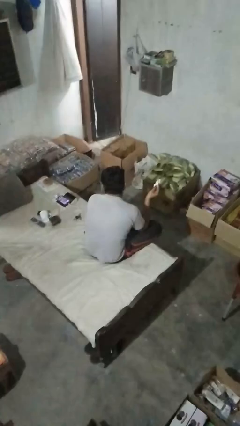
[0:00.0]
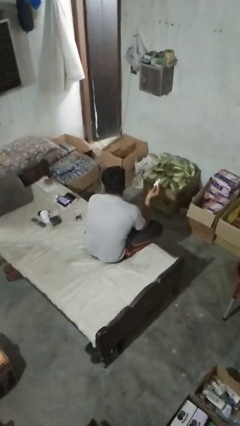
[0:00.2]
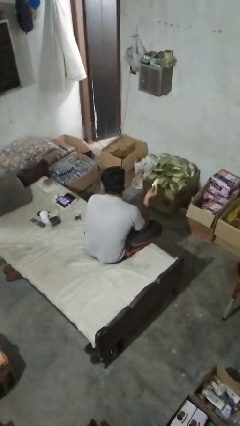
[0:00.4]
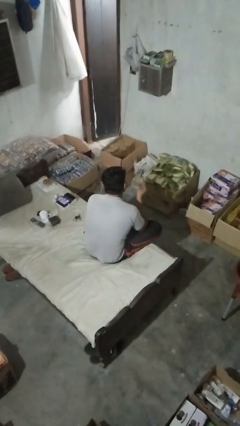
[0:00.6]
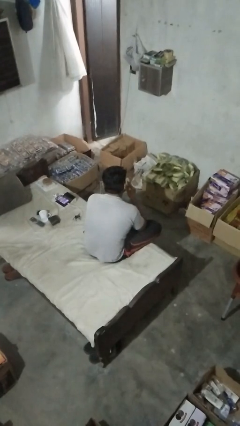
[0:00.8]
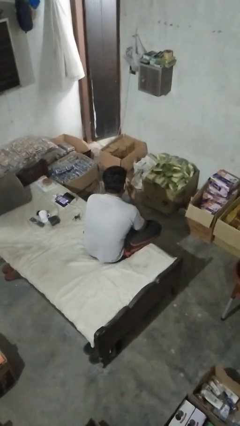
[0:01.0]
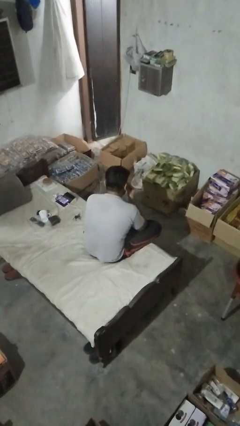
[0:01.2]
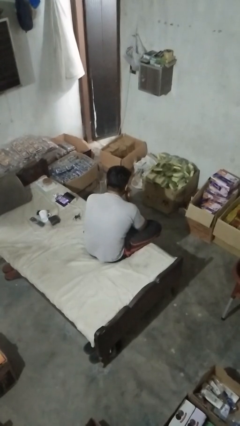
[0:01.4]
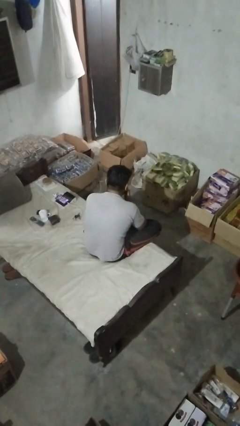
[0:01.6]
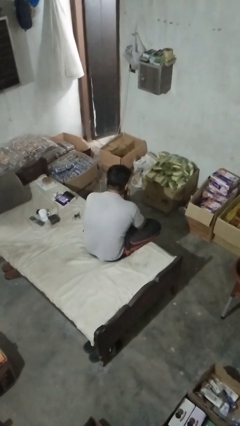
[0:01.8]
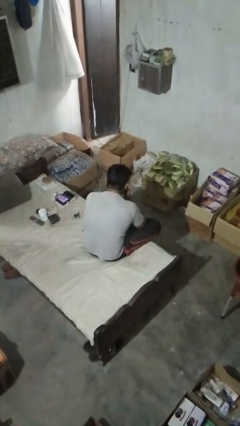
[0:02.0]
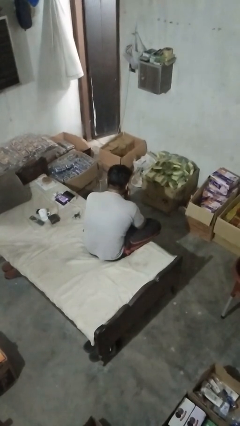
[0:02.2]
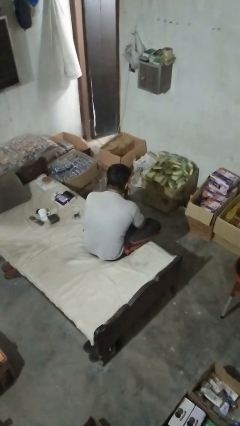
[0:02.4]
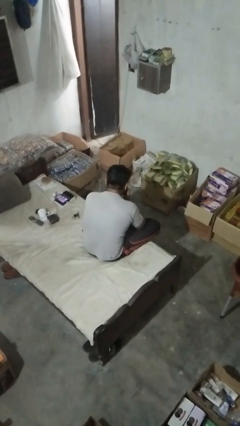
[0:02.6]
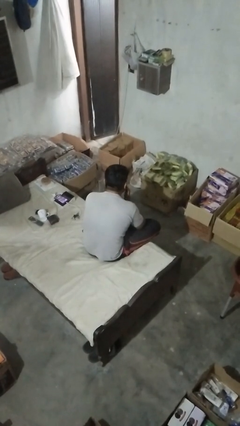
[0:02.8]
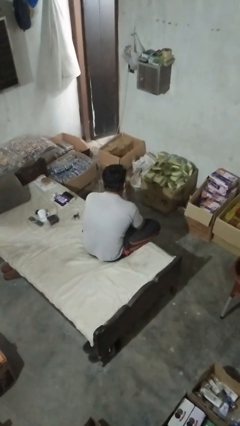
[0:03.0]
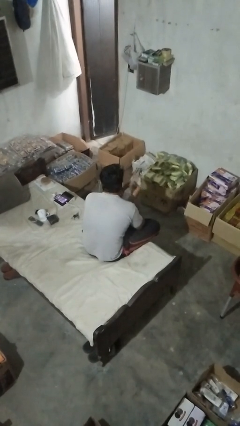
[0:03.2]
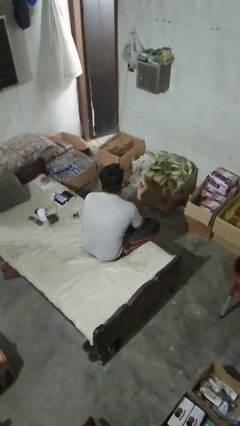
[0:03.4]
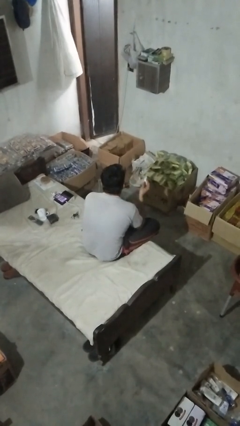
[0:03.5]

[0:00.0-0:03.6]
person blows nose

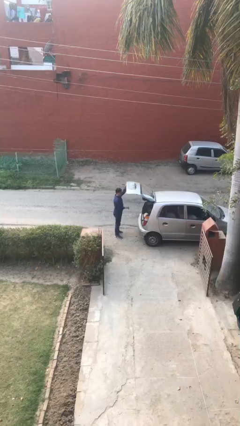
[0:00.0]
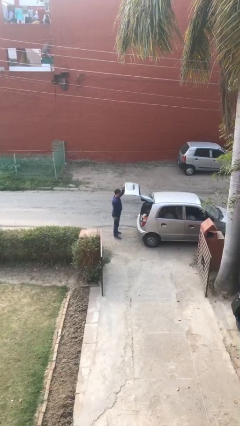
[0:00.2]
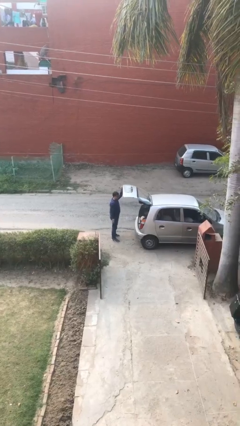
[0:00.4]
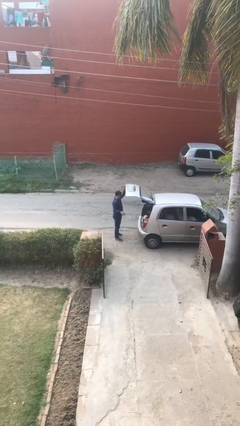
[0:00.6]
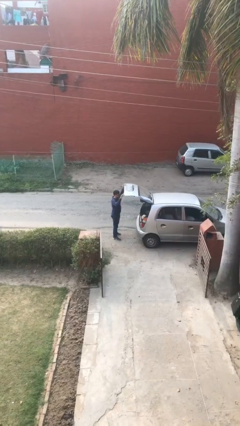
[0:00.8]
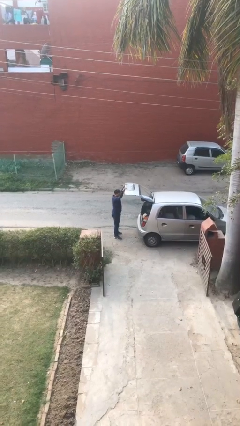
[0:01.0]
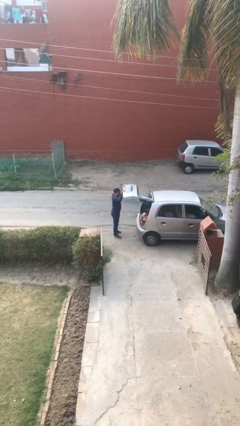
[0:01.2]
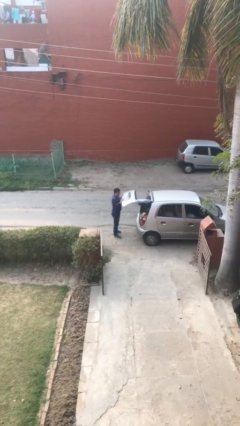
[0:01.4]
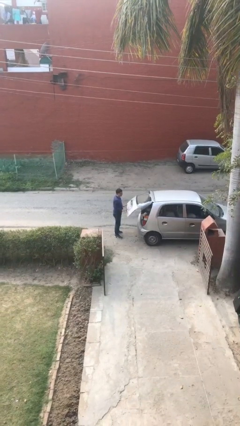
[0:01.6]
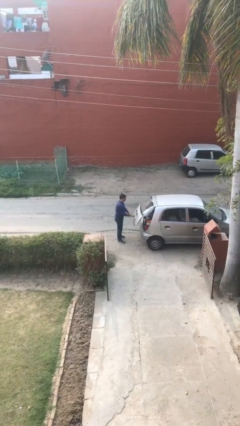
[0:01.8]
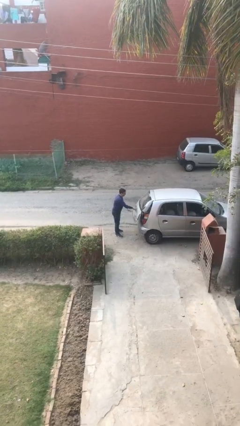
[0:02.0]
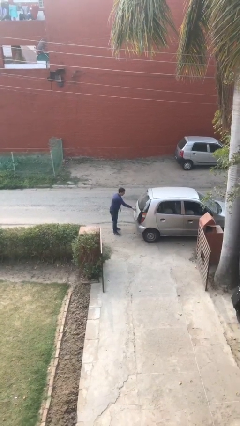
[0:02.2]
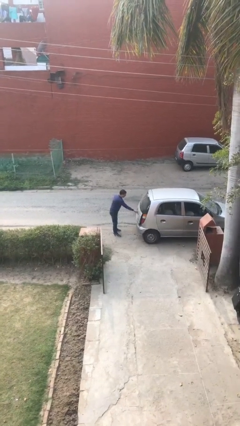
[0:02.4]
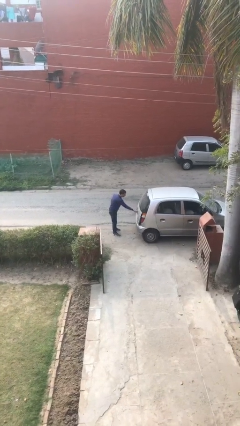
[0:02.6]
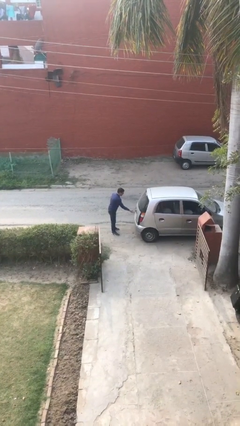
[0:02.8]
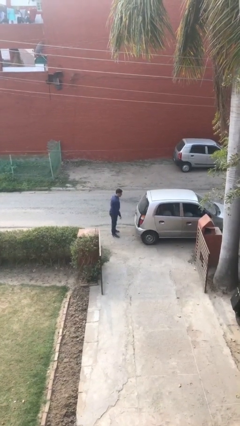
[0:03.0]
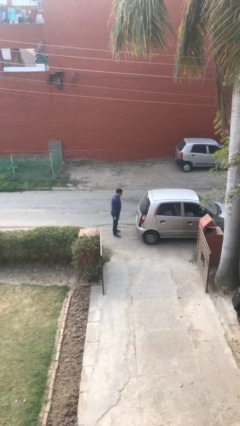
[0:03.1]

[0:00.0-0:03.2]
person closes car trunk

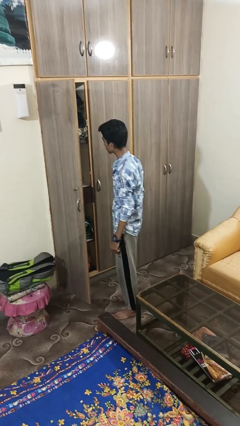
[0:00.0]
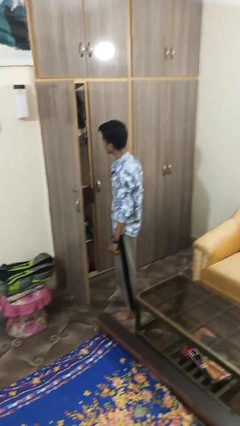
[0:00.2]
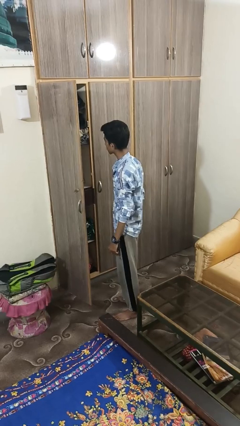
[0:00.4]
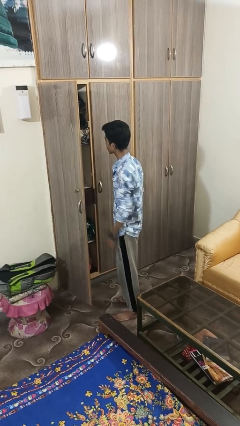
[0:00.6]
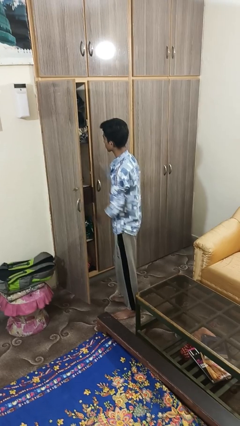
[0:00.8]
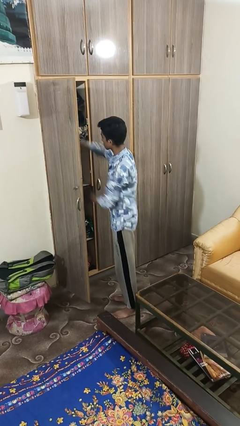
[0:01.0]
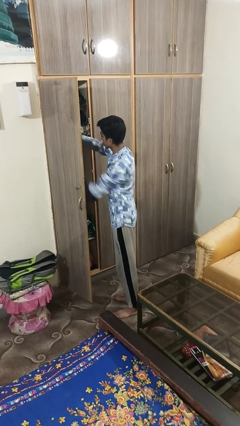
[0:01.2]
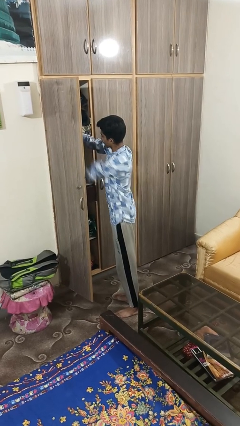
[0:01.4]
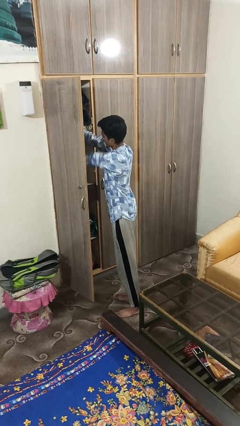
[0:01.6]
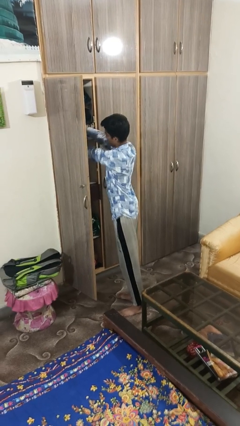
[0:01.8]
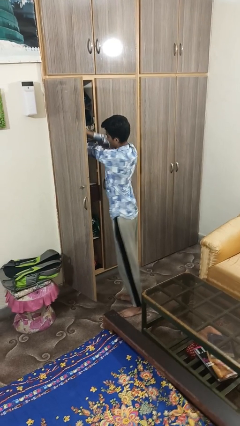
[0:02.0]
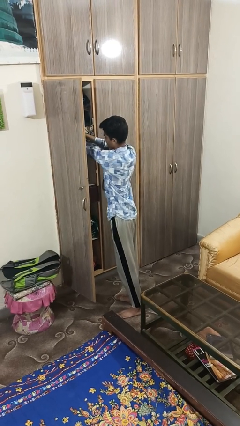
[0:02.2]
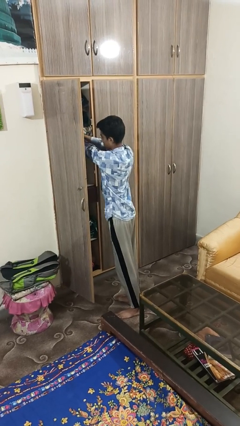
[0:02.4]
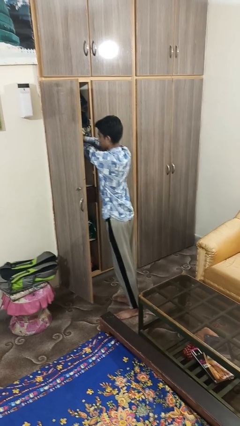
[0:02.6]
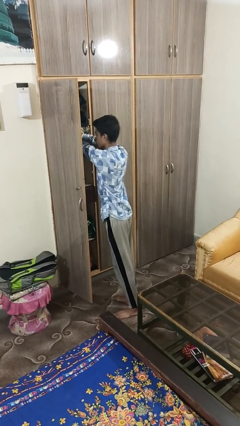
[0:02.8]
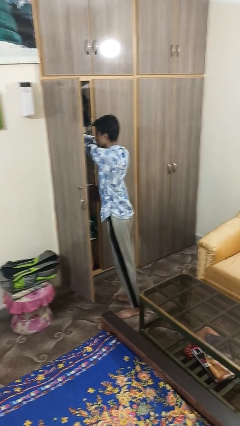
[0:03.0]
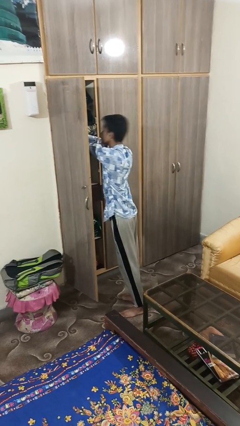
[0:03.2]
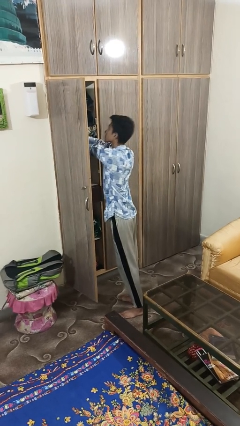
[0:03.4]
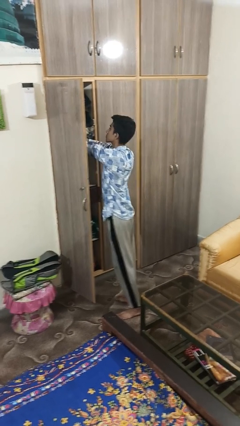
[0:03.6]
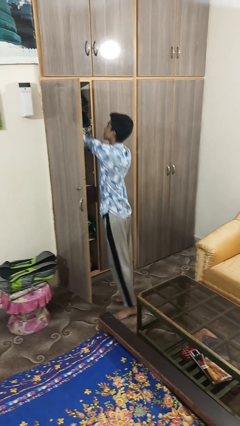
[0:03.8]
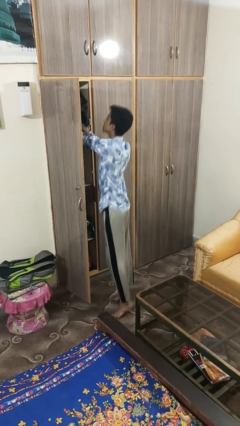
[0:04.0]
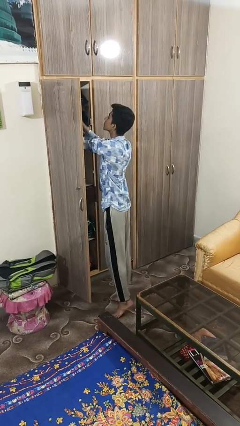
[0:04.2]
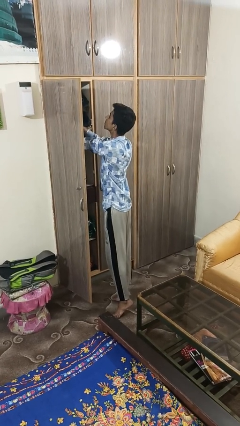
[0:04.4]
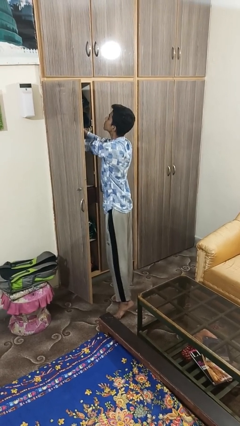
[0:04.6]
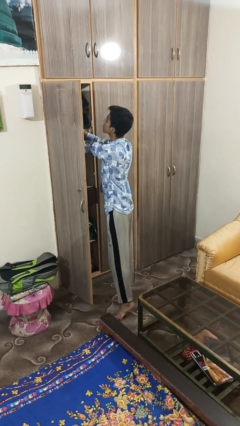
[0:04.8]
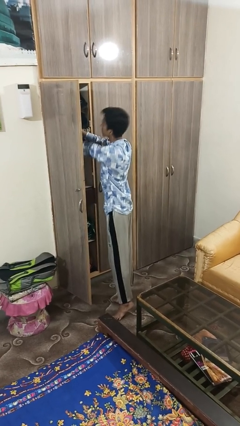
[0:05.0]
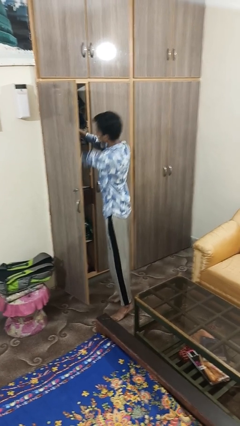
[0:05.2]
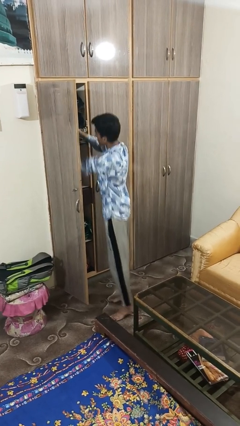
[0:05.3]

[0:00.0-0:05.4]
person searches in cabinet

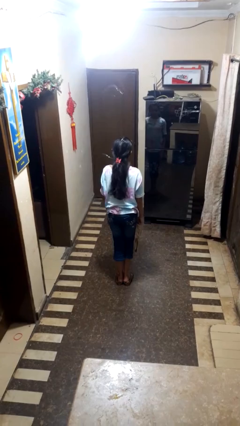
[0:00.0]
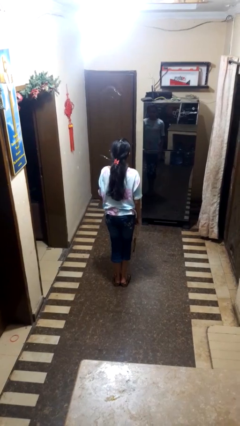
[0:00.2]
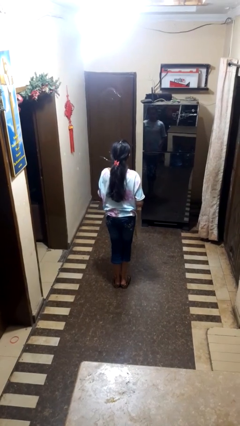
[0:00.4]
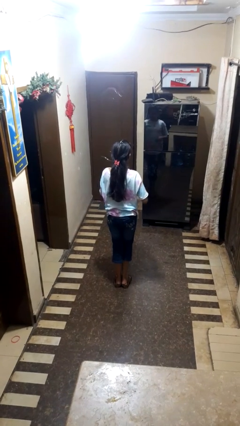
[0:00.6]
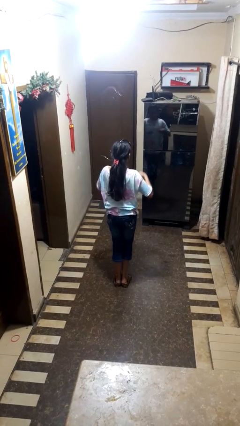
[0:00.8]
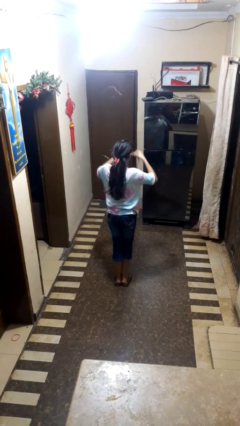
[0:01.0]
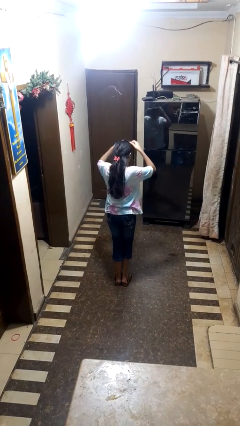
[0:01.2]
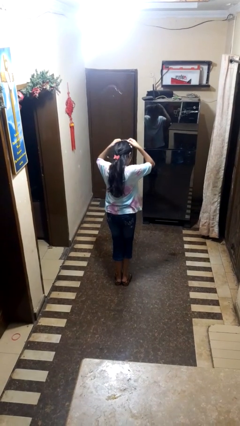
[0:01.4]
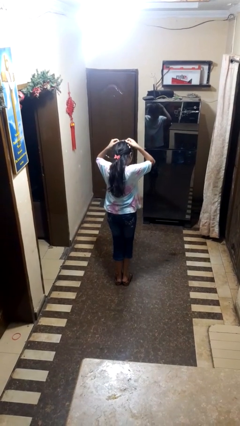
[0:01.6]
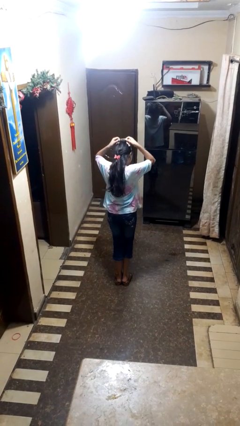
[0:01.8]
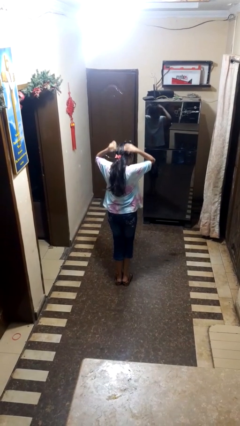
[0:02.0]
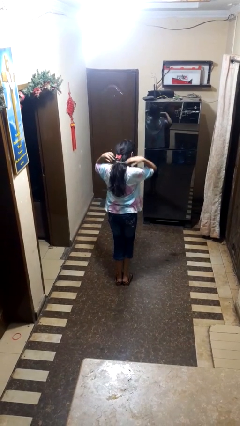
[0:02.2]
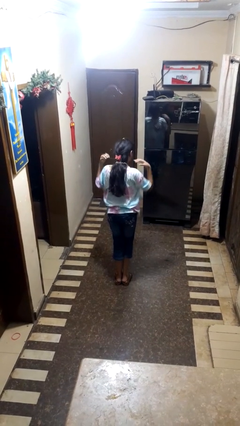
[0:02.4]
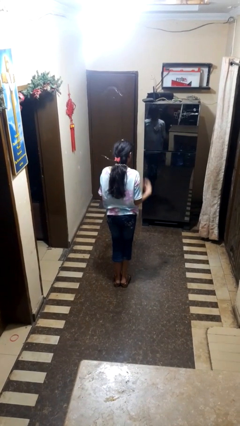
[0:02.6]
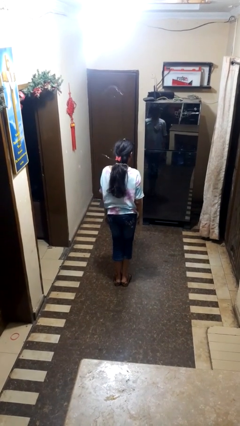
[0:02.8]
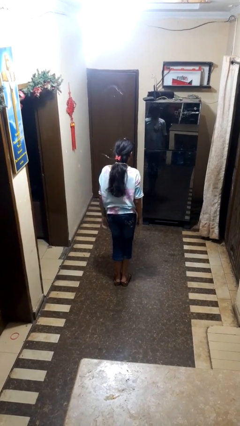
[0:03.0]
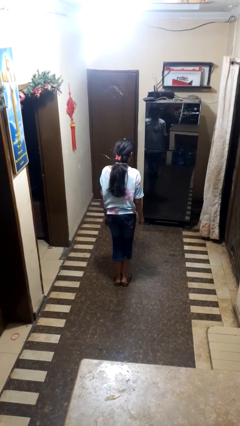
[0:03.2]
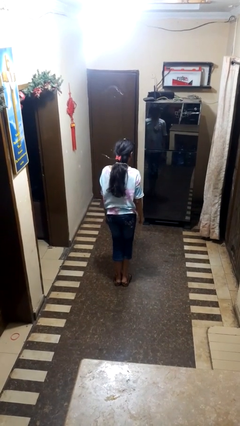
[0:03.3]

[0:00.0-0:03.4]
person puts on necklace

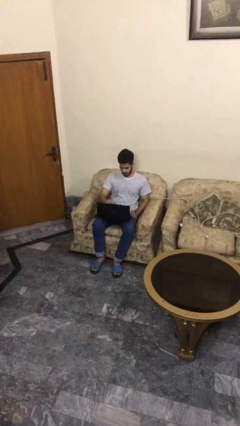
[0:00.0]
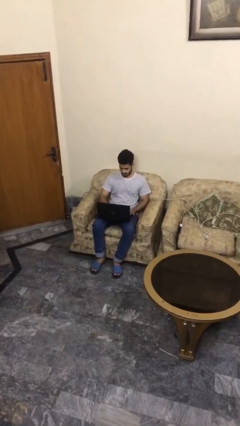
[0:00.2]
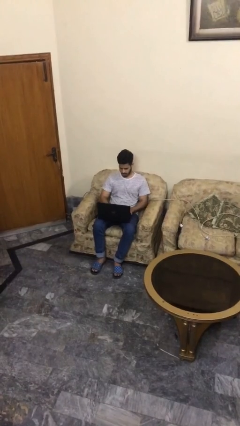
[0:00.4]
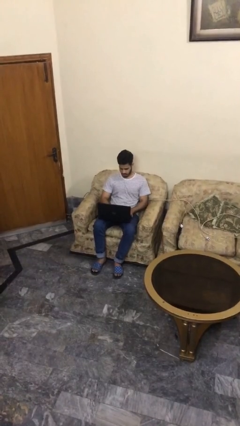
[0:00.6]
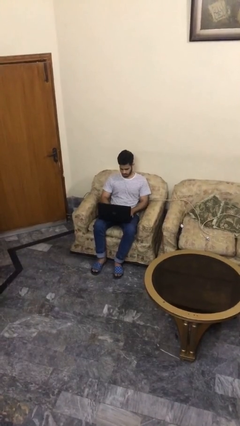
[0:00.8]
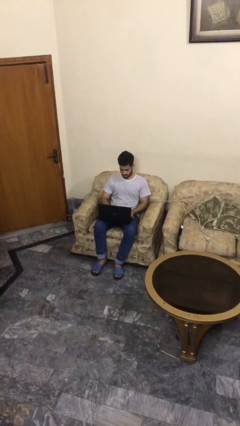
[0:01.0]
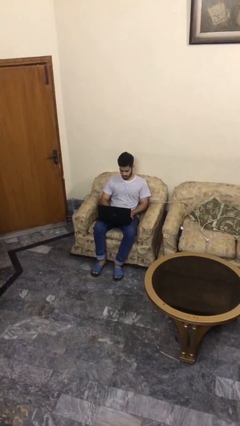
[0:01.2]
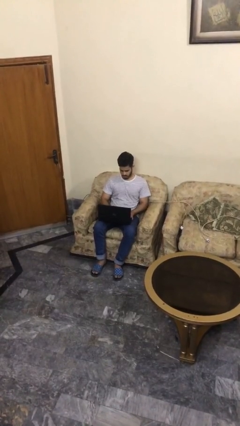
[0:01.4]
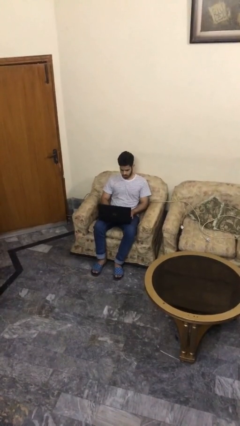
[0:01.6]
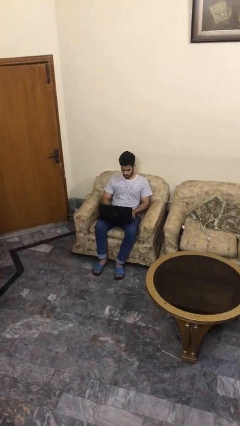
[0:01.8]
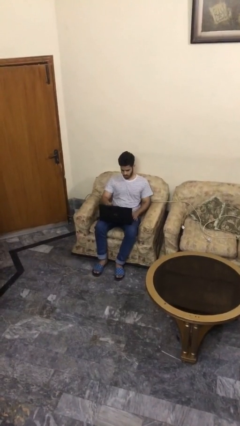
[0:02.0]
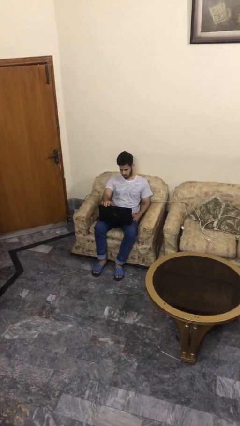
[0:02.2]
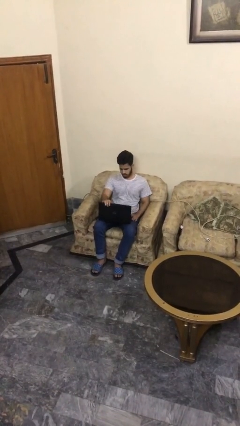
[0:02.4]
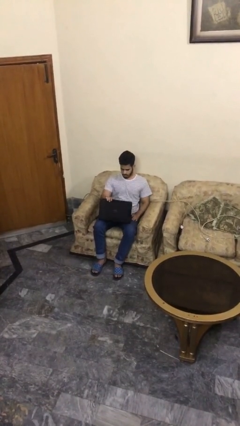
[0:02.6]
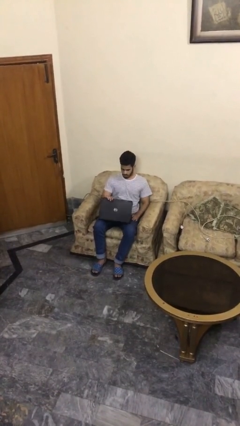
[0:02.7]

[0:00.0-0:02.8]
person interacts with laptop
